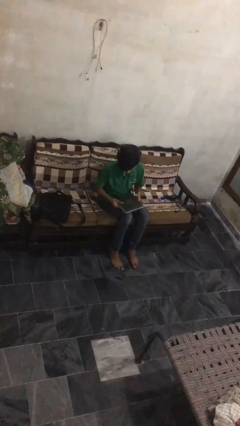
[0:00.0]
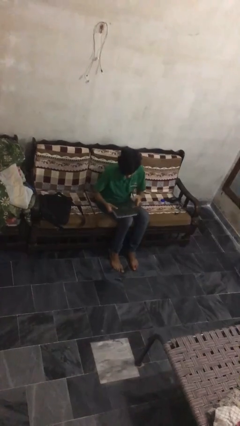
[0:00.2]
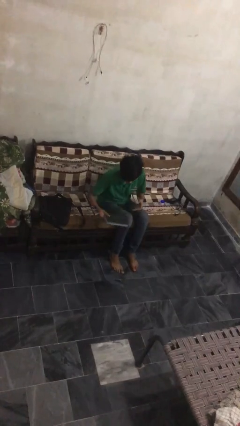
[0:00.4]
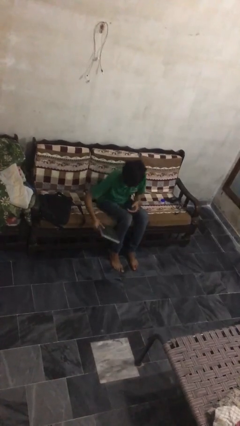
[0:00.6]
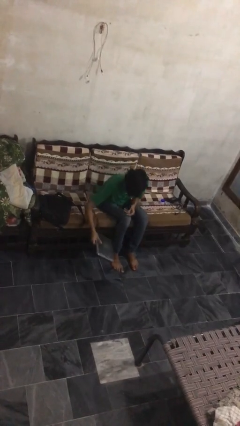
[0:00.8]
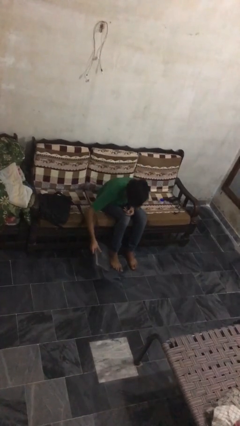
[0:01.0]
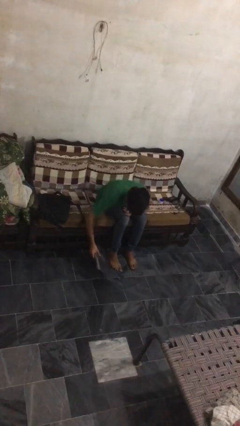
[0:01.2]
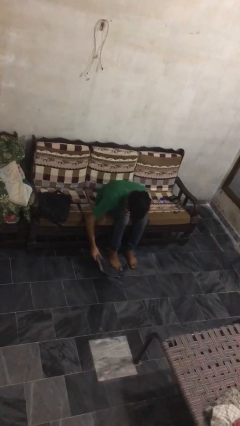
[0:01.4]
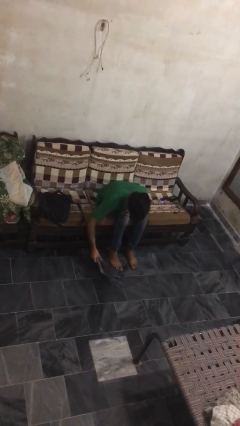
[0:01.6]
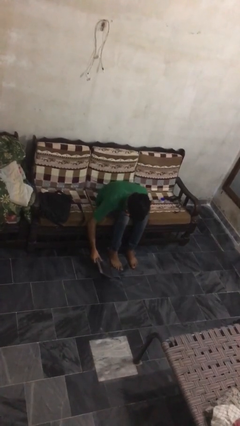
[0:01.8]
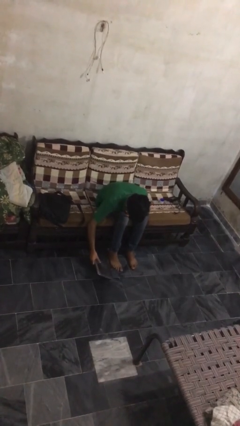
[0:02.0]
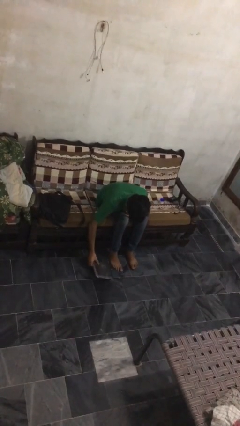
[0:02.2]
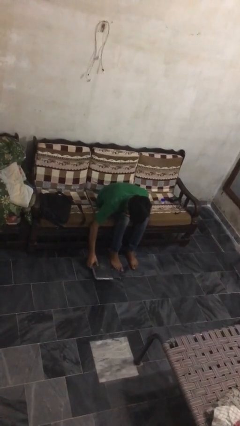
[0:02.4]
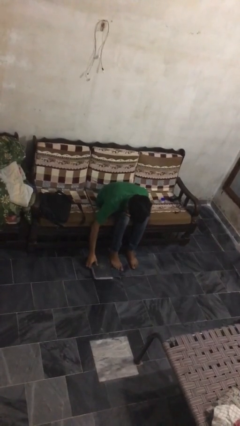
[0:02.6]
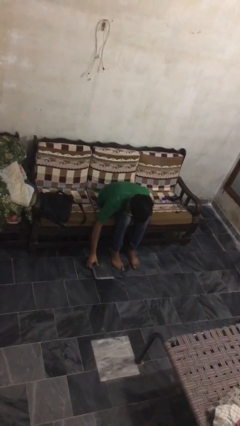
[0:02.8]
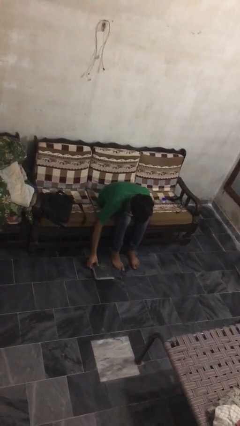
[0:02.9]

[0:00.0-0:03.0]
person puts down object on floor

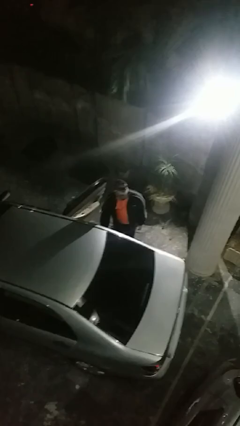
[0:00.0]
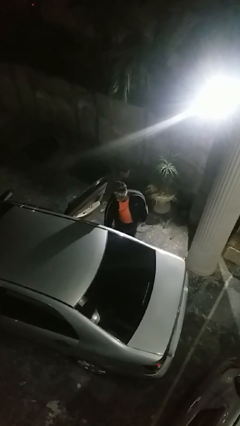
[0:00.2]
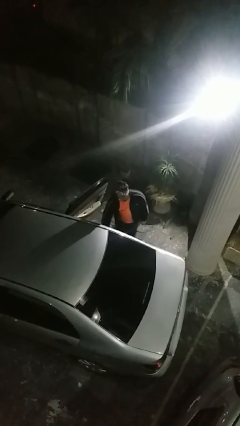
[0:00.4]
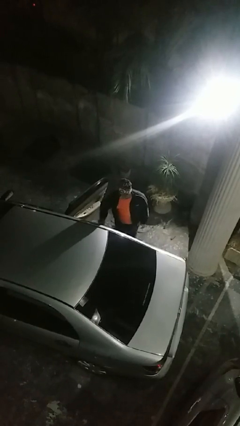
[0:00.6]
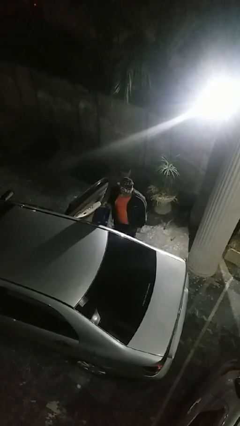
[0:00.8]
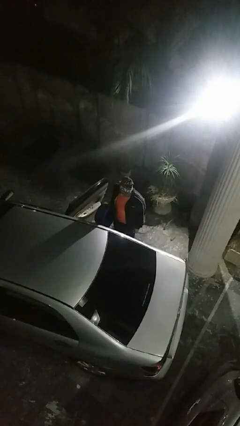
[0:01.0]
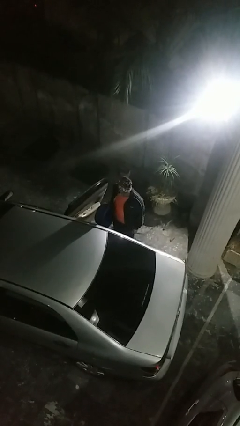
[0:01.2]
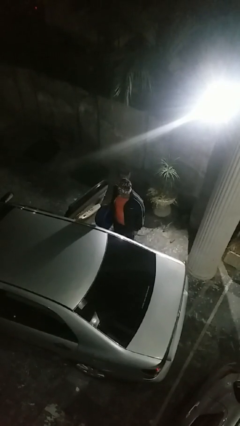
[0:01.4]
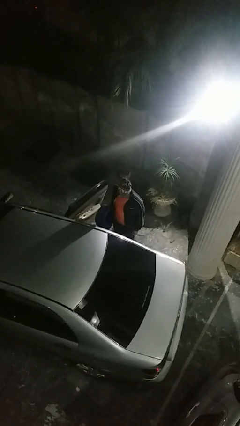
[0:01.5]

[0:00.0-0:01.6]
person unloads car

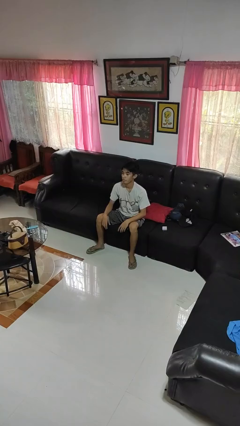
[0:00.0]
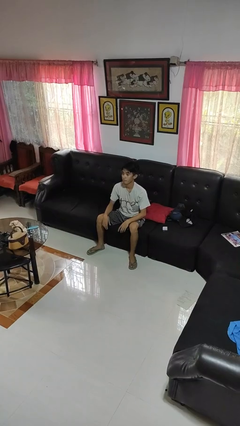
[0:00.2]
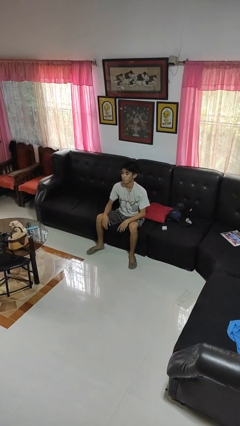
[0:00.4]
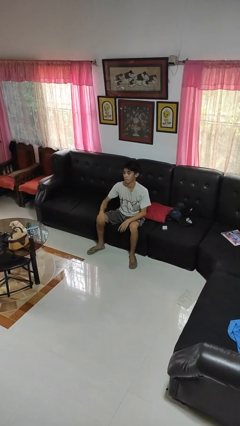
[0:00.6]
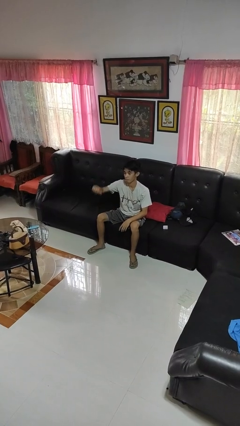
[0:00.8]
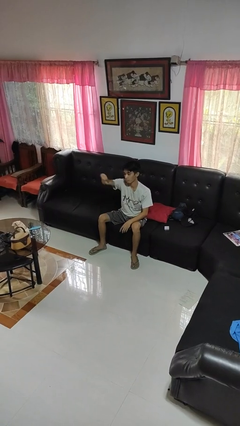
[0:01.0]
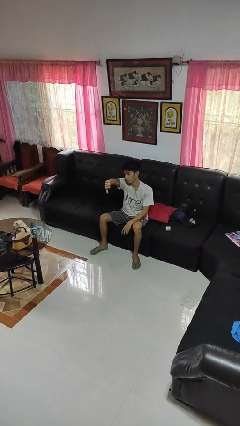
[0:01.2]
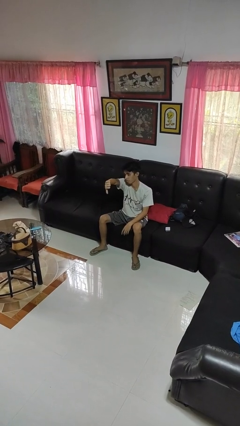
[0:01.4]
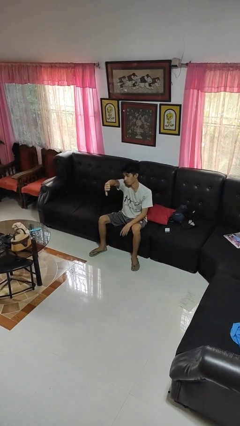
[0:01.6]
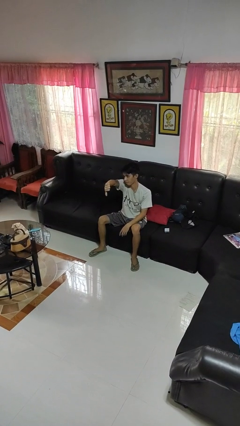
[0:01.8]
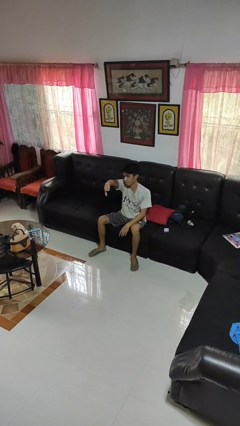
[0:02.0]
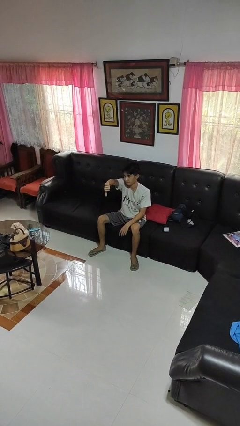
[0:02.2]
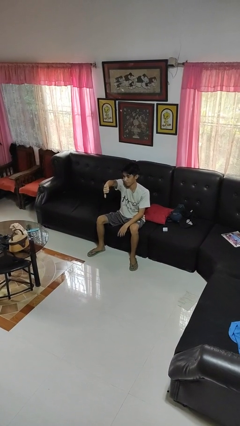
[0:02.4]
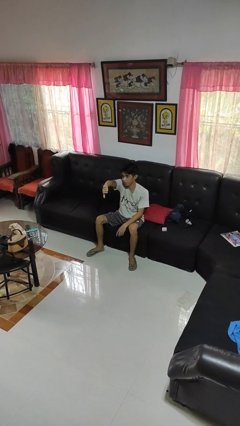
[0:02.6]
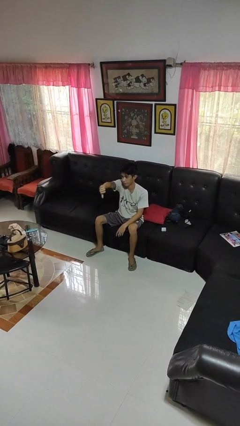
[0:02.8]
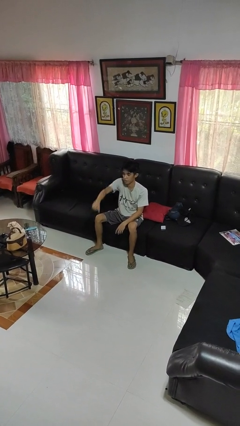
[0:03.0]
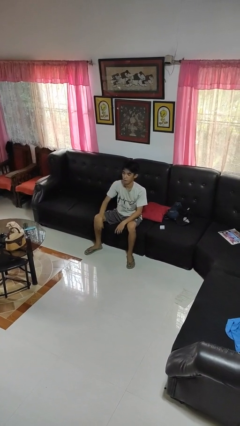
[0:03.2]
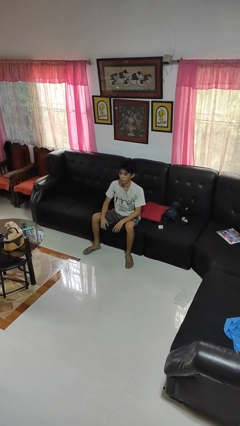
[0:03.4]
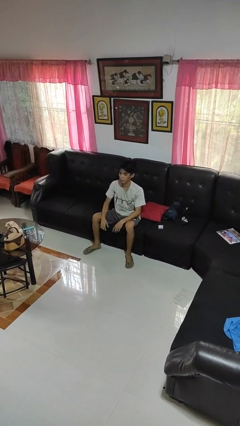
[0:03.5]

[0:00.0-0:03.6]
person gestures thumbs down

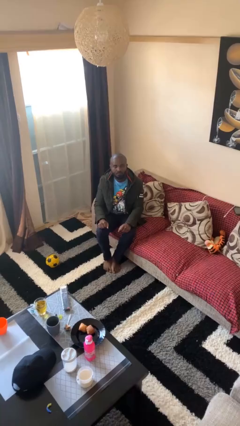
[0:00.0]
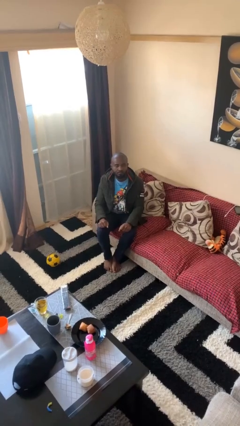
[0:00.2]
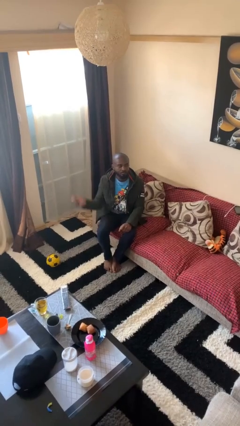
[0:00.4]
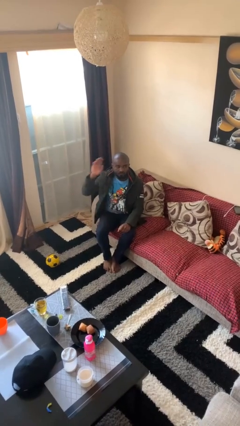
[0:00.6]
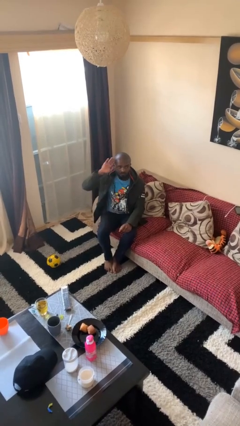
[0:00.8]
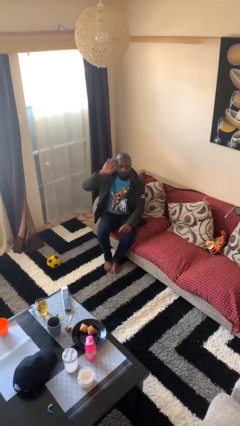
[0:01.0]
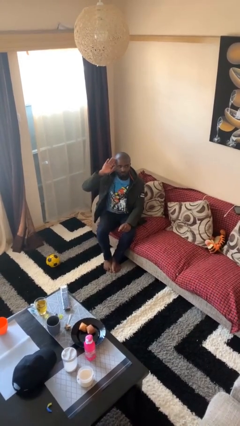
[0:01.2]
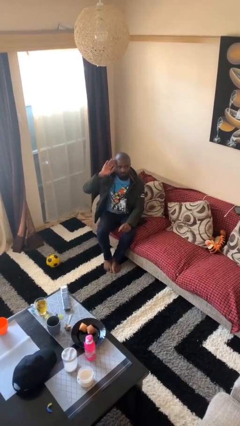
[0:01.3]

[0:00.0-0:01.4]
person salutes

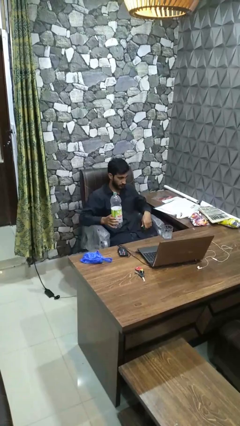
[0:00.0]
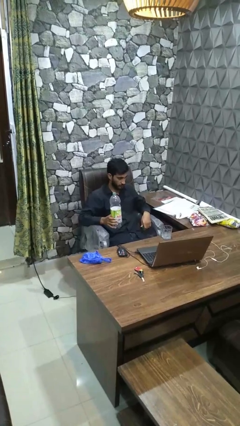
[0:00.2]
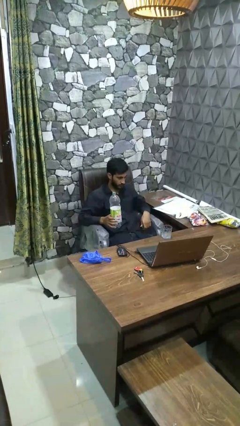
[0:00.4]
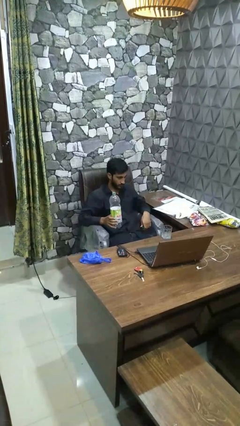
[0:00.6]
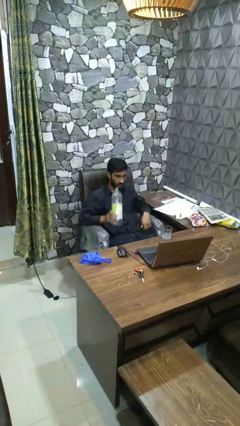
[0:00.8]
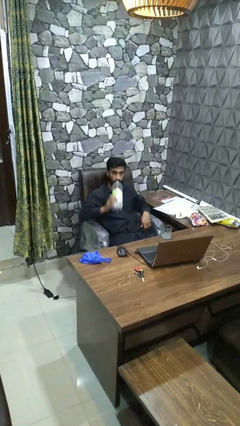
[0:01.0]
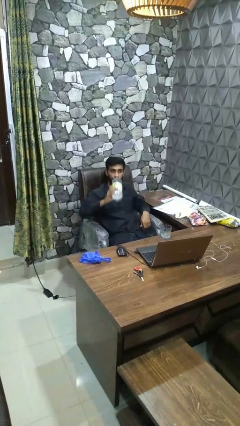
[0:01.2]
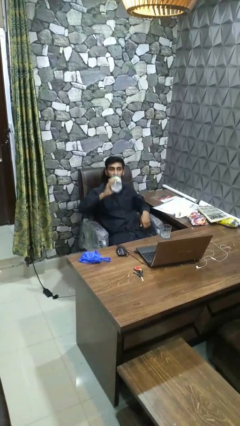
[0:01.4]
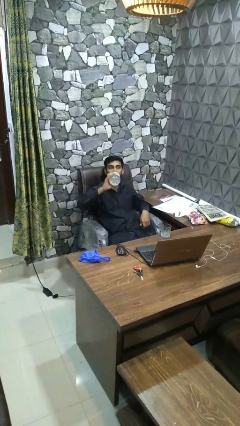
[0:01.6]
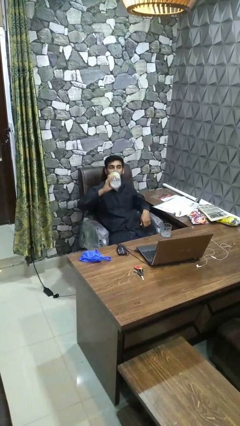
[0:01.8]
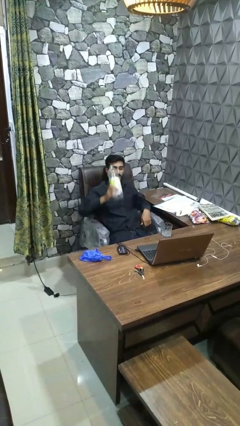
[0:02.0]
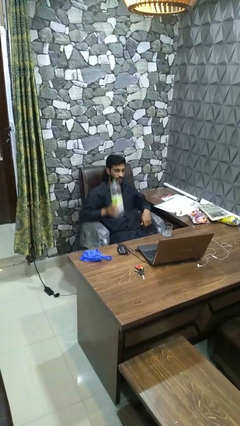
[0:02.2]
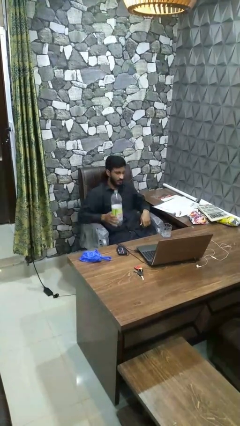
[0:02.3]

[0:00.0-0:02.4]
person drinks from bottle

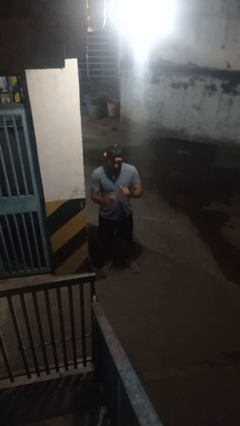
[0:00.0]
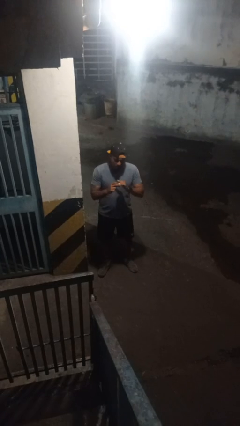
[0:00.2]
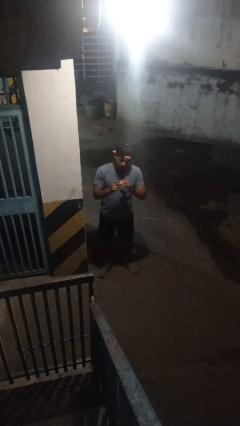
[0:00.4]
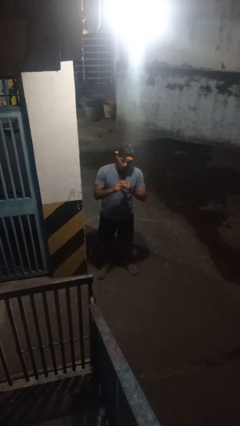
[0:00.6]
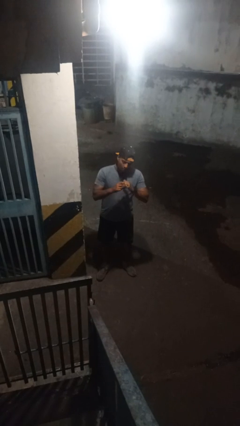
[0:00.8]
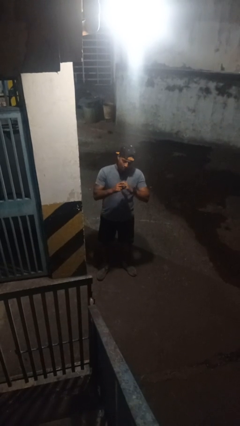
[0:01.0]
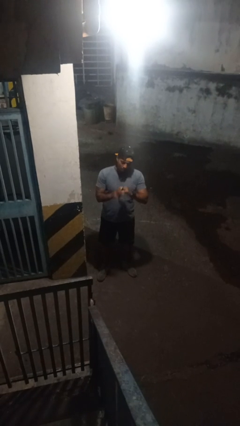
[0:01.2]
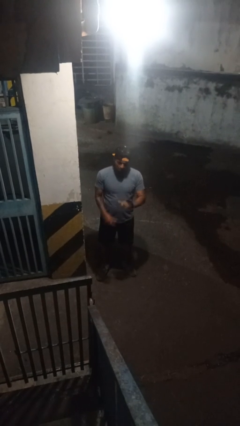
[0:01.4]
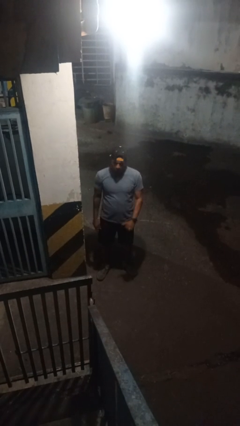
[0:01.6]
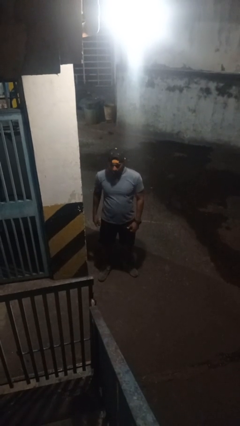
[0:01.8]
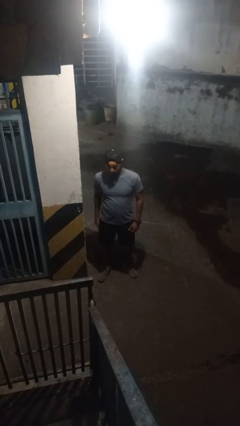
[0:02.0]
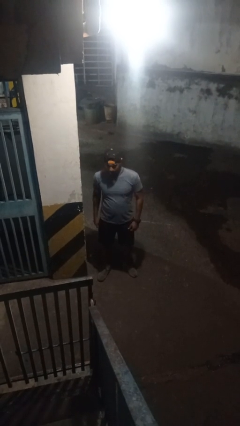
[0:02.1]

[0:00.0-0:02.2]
person puts on ring

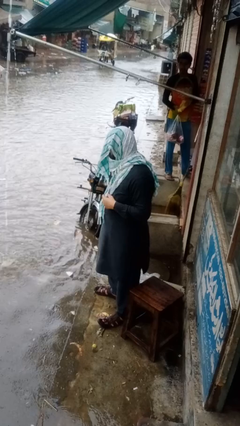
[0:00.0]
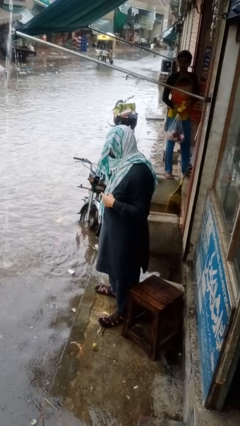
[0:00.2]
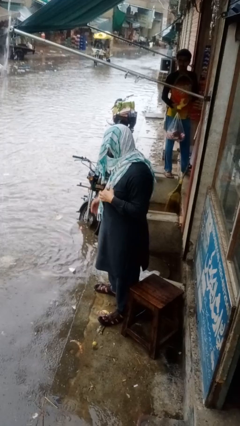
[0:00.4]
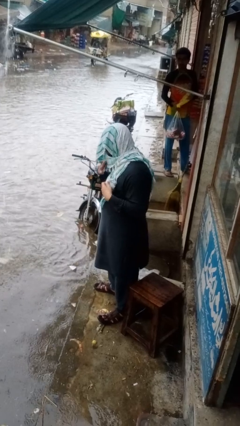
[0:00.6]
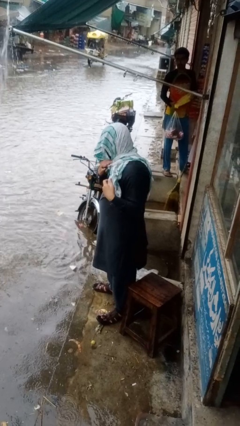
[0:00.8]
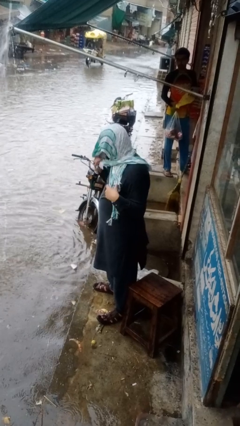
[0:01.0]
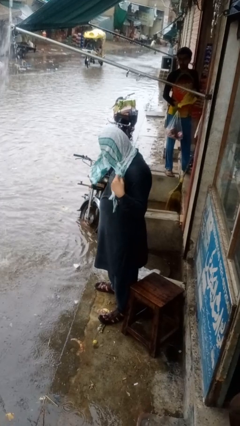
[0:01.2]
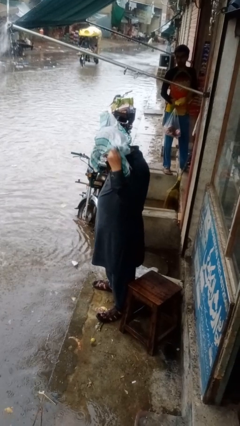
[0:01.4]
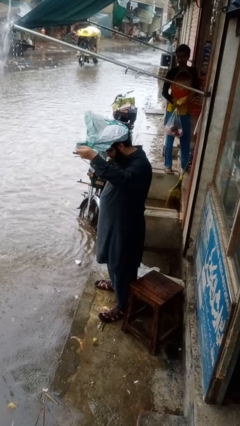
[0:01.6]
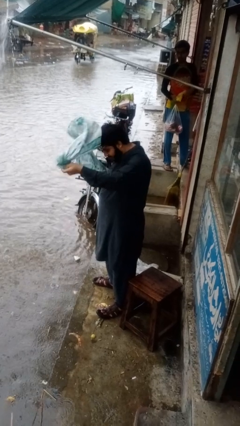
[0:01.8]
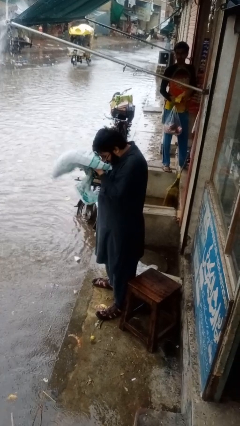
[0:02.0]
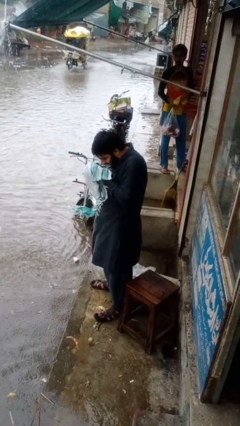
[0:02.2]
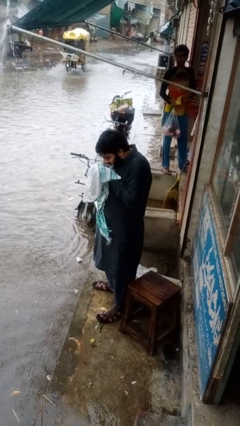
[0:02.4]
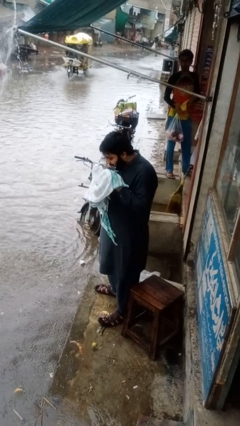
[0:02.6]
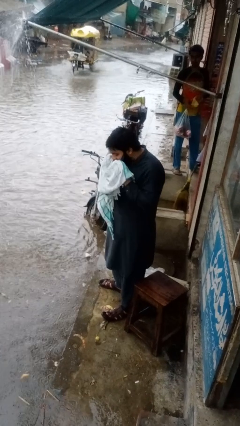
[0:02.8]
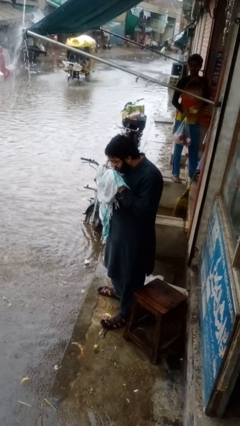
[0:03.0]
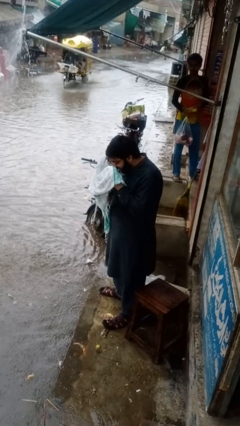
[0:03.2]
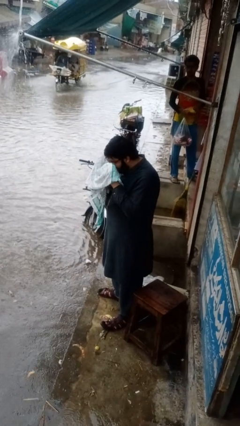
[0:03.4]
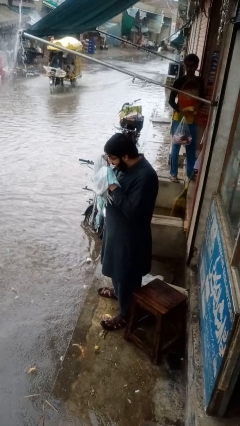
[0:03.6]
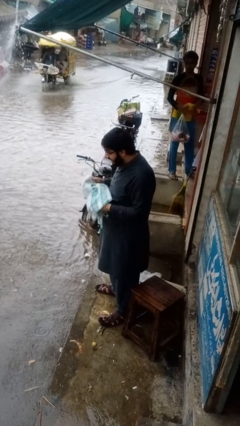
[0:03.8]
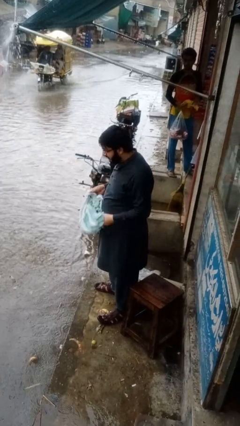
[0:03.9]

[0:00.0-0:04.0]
person takes off scarf
